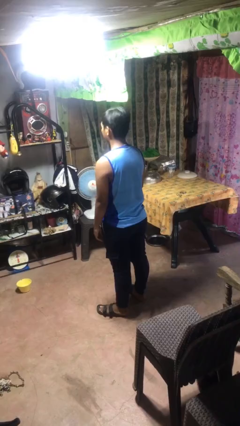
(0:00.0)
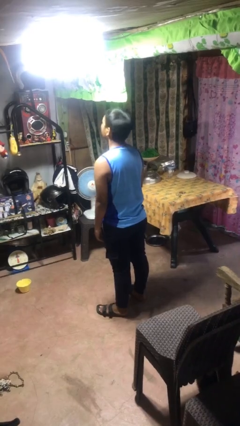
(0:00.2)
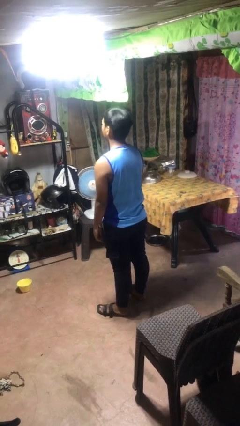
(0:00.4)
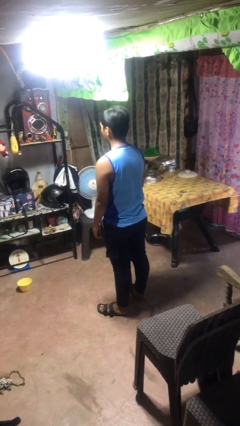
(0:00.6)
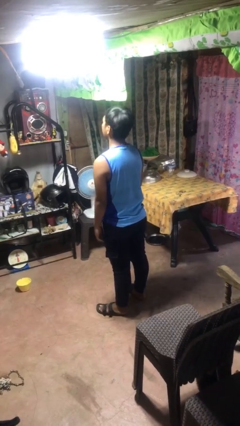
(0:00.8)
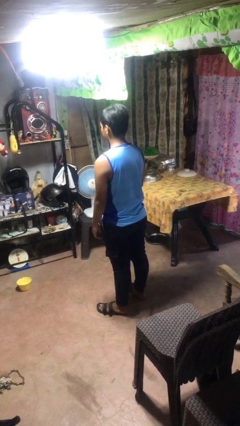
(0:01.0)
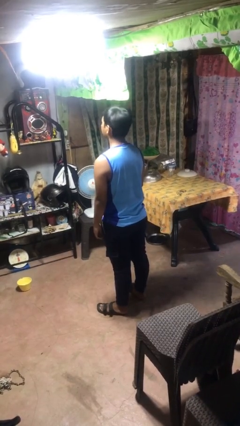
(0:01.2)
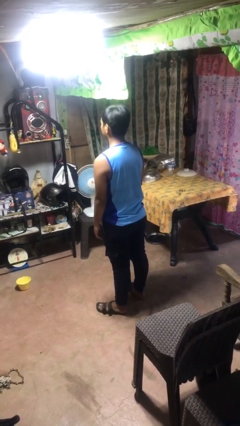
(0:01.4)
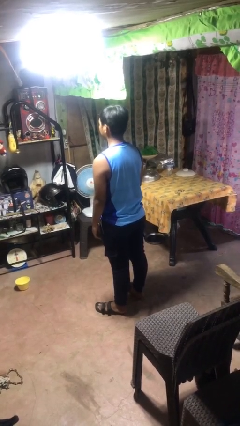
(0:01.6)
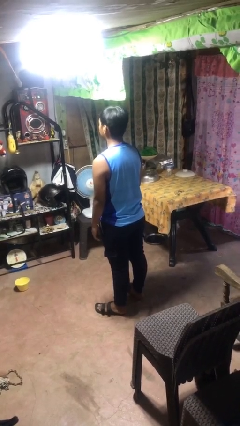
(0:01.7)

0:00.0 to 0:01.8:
person nods head

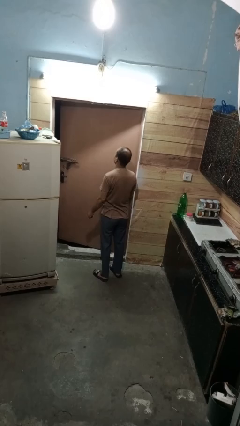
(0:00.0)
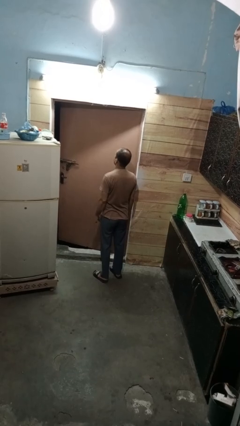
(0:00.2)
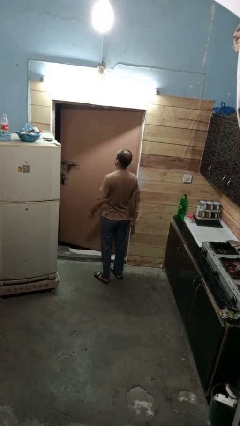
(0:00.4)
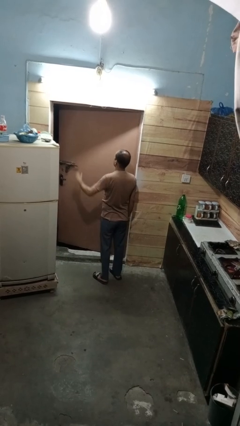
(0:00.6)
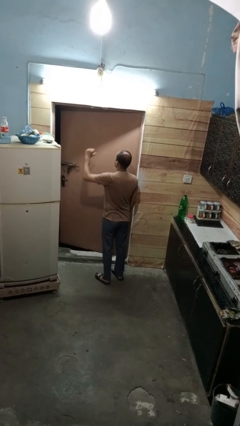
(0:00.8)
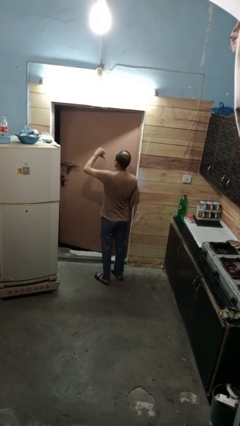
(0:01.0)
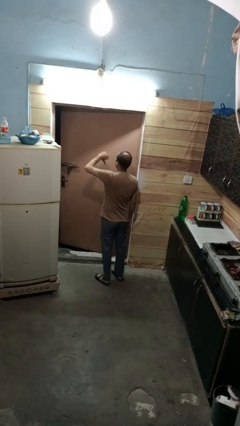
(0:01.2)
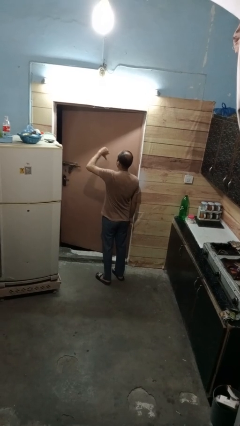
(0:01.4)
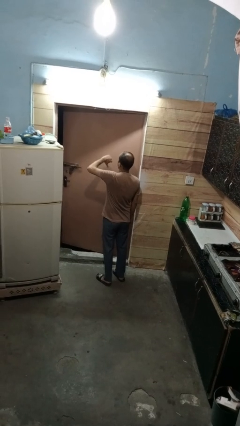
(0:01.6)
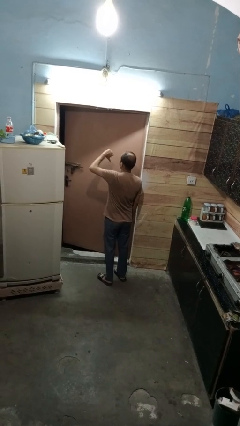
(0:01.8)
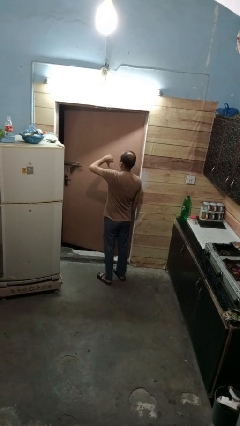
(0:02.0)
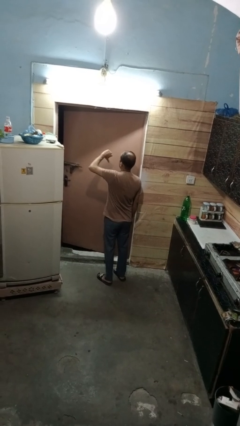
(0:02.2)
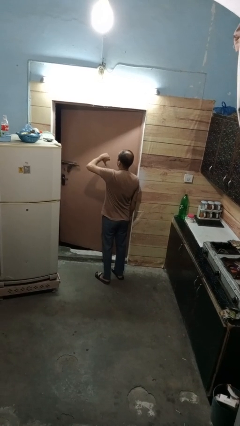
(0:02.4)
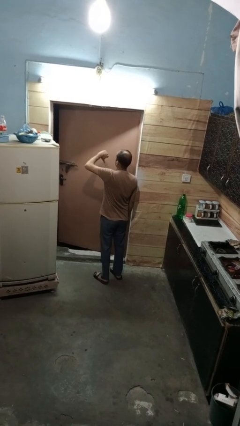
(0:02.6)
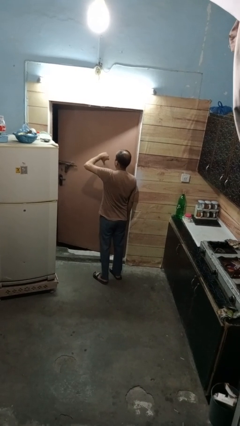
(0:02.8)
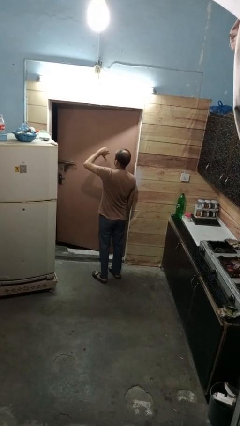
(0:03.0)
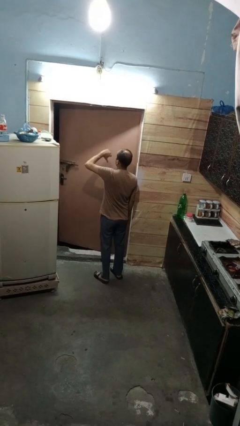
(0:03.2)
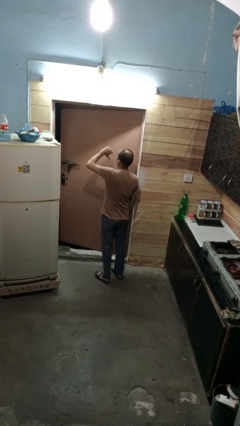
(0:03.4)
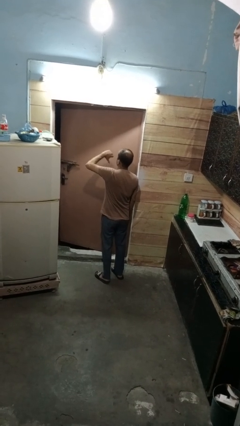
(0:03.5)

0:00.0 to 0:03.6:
person gestures hang loose

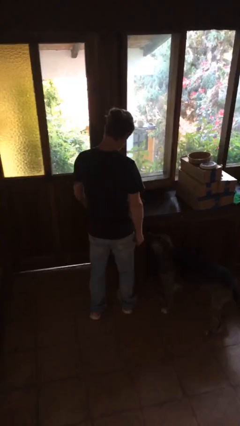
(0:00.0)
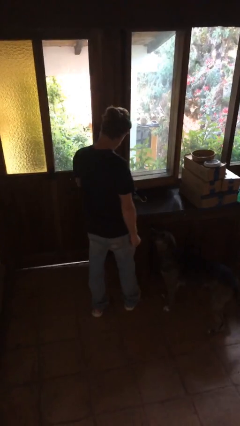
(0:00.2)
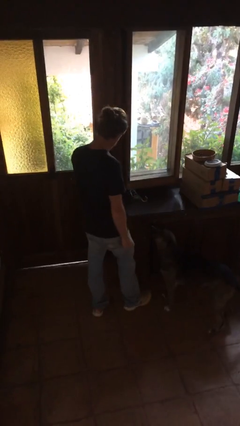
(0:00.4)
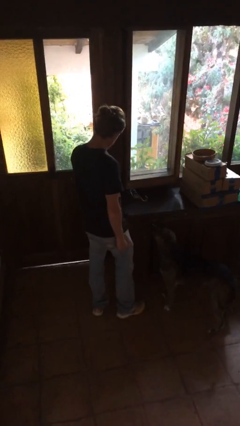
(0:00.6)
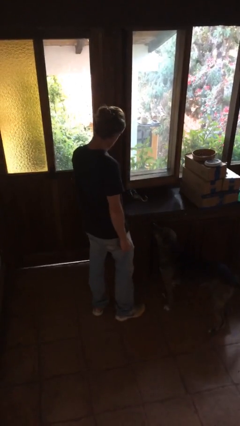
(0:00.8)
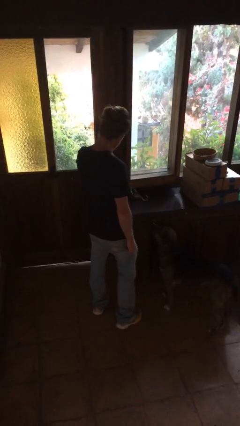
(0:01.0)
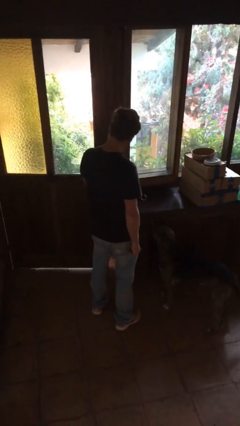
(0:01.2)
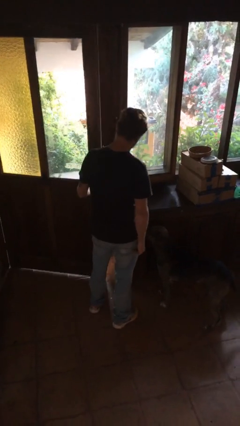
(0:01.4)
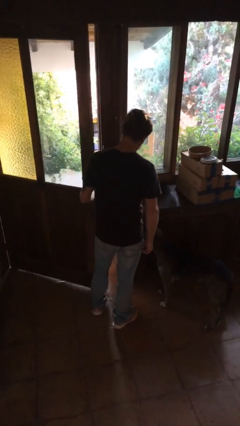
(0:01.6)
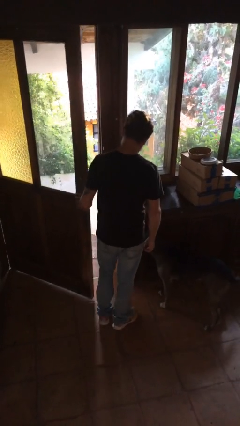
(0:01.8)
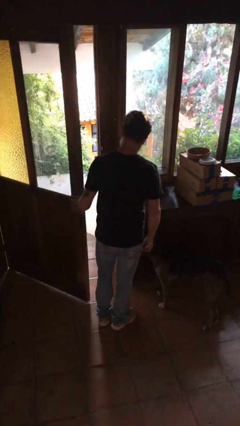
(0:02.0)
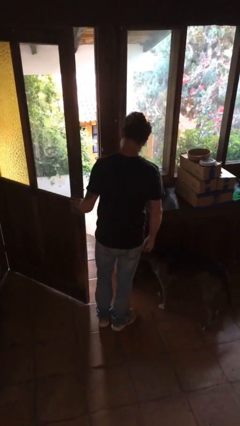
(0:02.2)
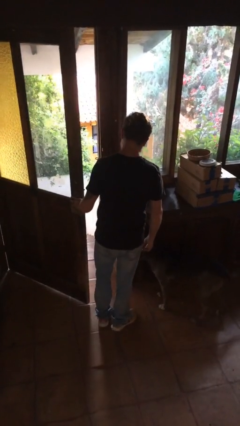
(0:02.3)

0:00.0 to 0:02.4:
person opens facility door

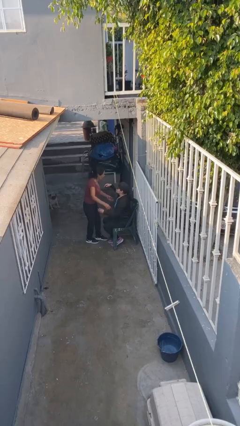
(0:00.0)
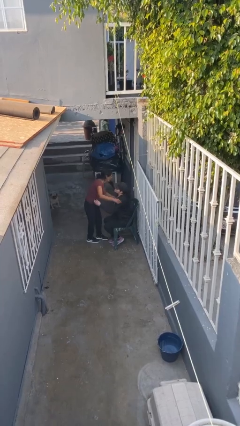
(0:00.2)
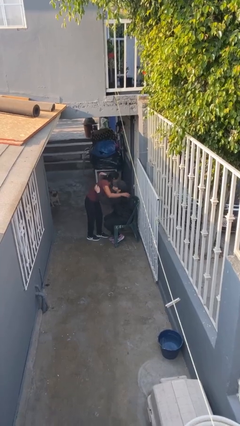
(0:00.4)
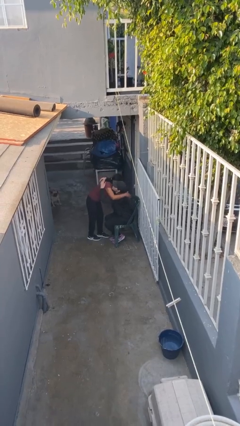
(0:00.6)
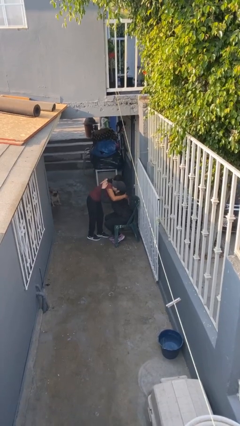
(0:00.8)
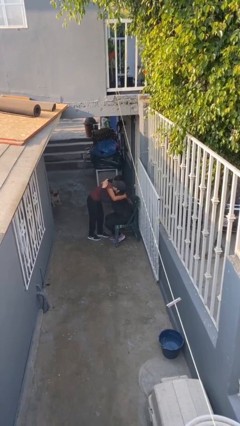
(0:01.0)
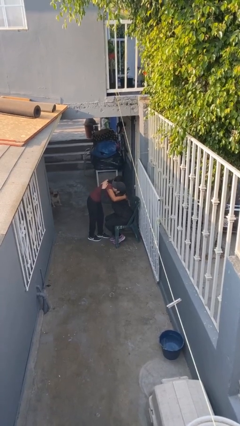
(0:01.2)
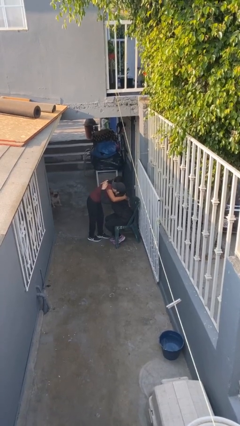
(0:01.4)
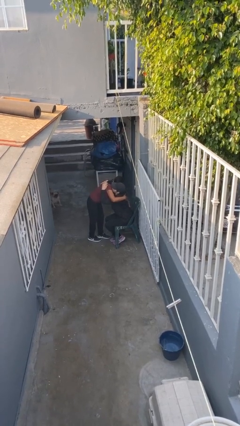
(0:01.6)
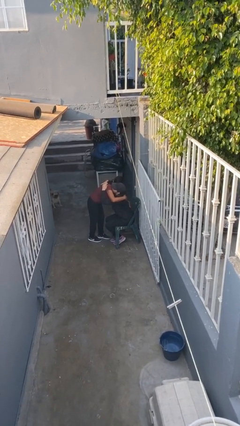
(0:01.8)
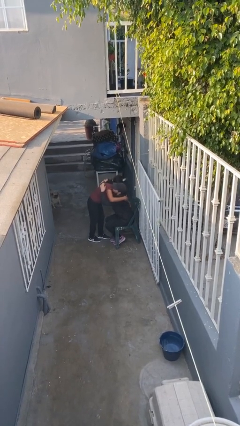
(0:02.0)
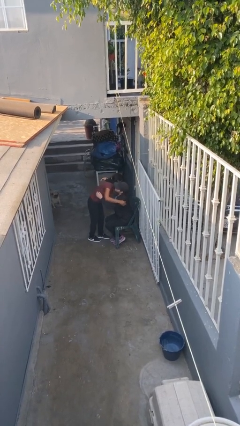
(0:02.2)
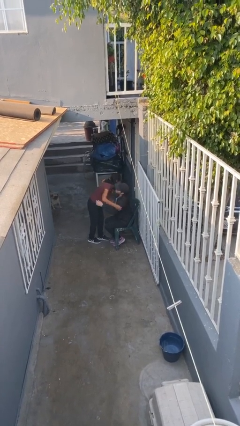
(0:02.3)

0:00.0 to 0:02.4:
person embraces person

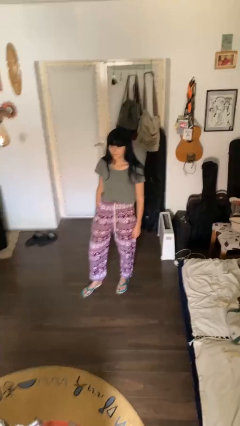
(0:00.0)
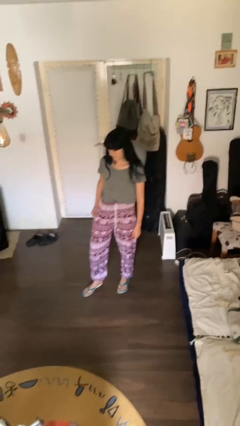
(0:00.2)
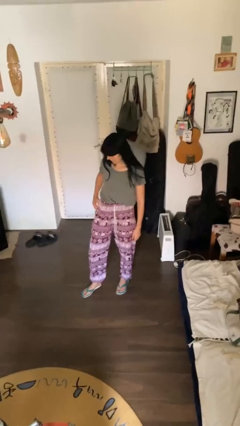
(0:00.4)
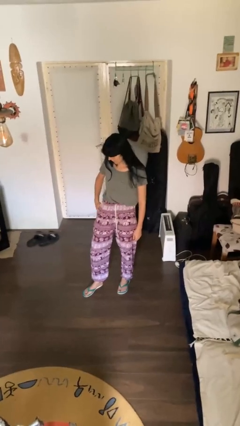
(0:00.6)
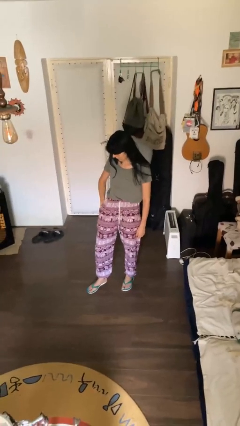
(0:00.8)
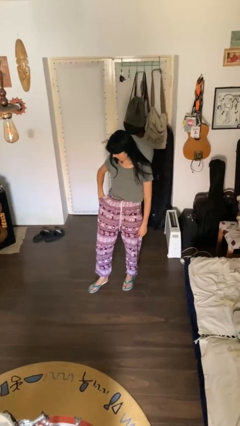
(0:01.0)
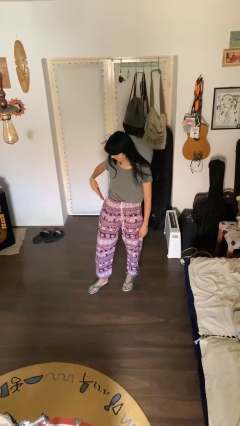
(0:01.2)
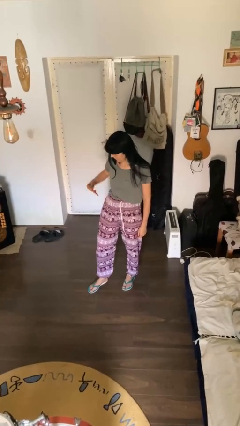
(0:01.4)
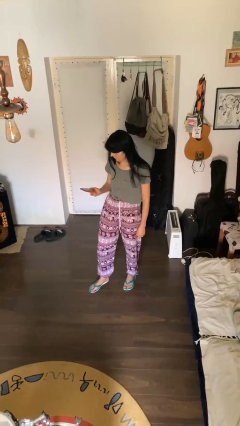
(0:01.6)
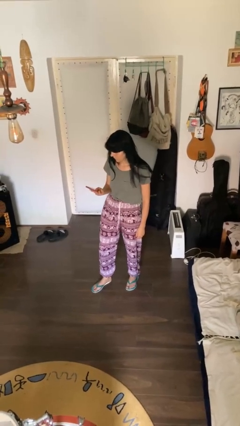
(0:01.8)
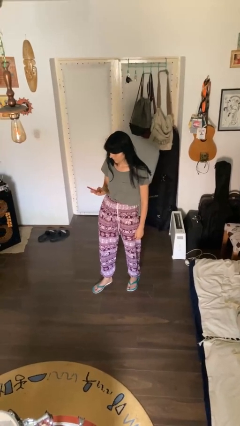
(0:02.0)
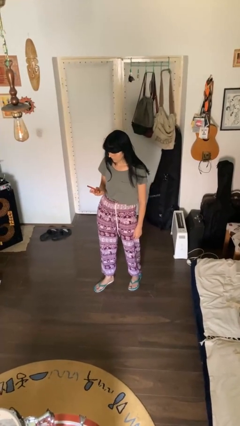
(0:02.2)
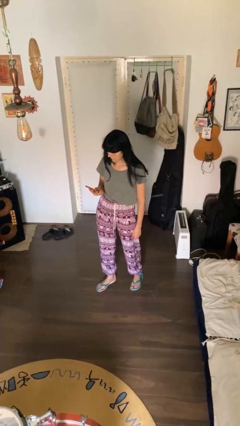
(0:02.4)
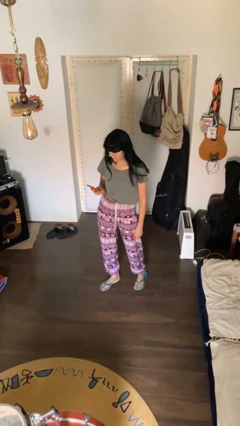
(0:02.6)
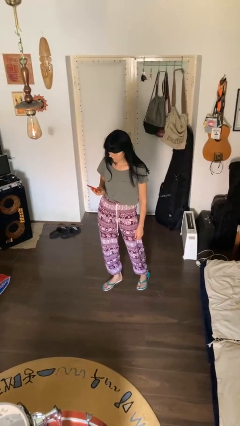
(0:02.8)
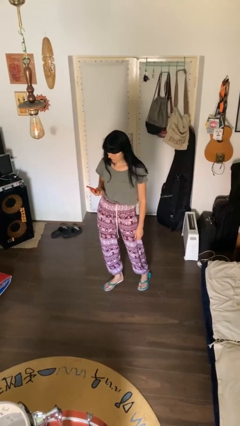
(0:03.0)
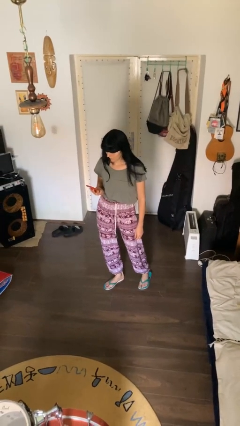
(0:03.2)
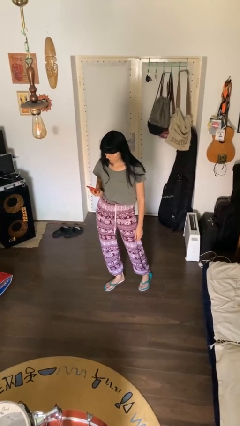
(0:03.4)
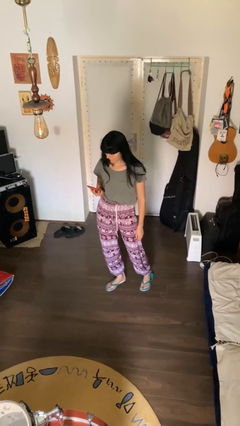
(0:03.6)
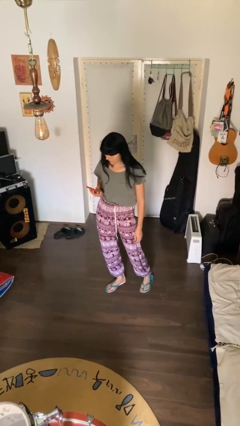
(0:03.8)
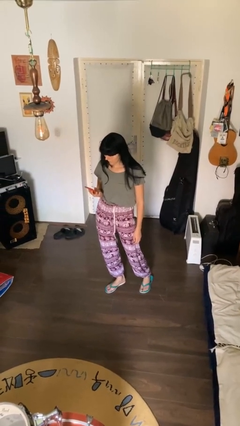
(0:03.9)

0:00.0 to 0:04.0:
person takes phone from pocket

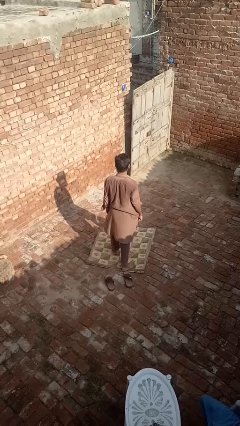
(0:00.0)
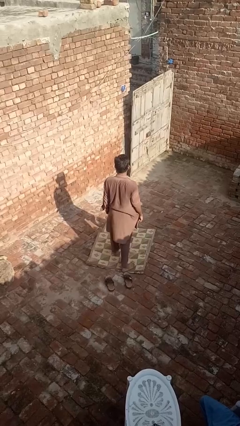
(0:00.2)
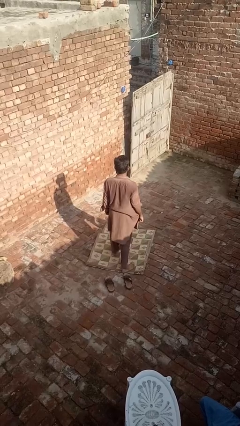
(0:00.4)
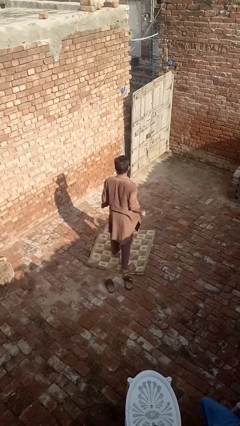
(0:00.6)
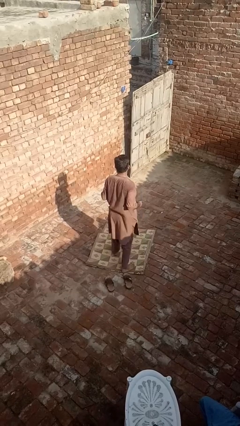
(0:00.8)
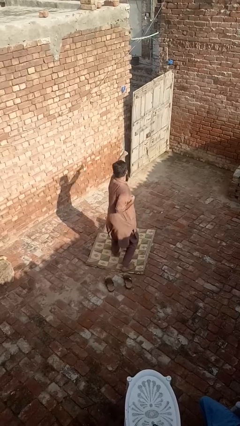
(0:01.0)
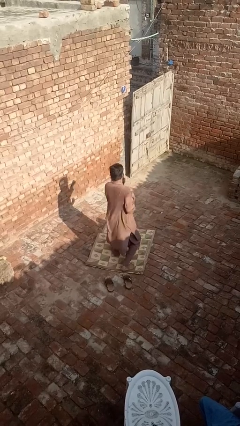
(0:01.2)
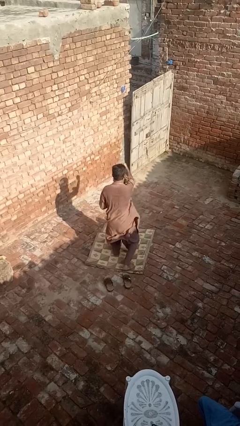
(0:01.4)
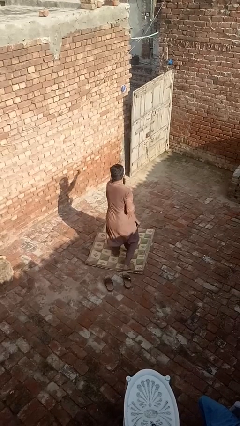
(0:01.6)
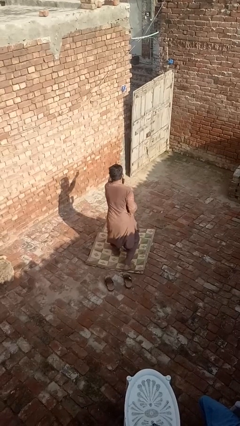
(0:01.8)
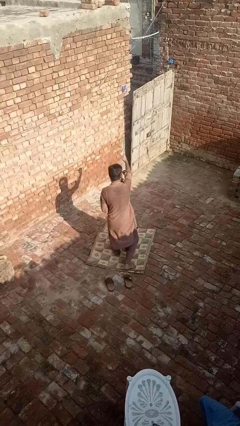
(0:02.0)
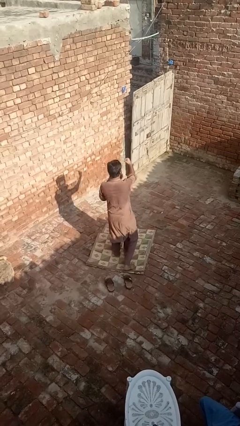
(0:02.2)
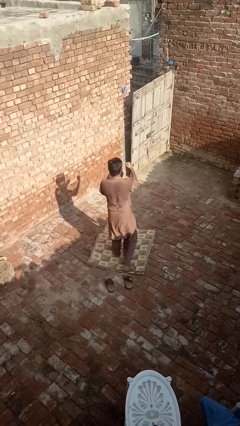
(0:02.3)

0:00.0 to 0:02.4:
person punches

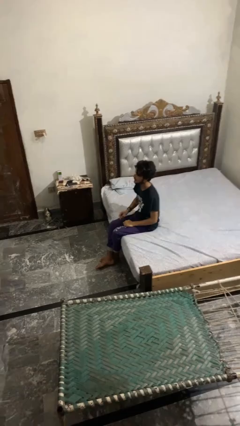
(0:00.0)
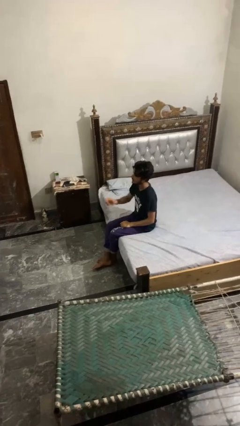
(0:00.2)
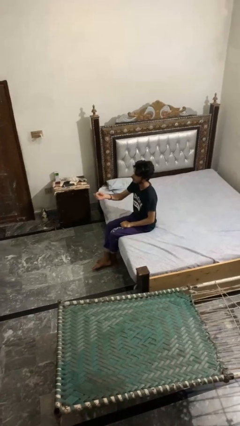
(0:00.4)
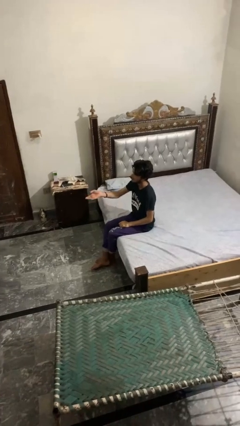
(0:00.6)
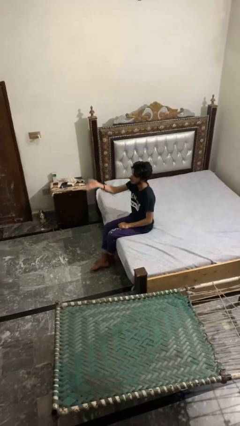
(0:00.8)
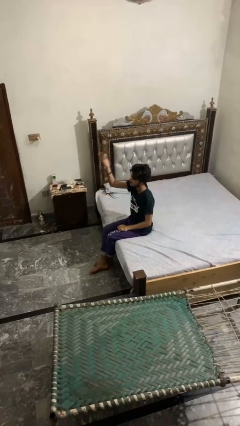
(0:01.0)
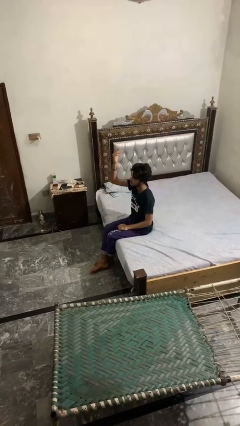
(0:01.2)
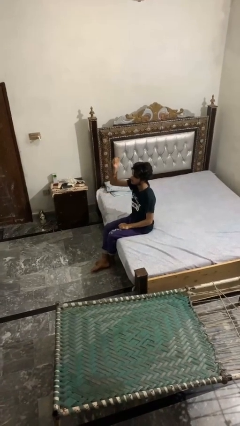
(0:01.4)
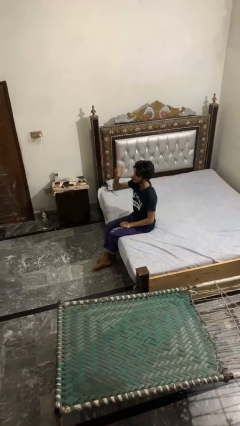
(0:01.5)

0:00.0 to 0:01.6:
person gestures swipe up
